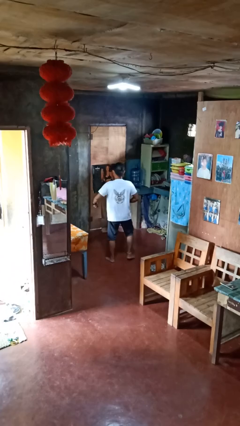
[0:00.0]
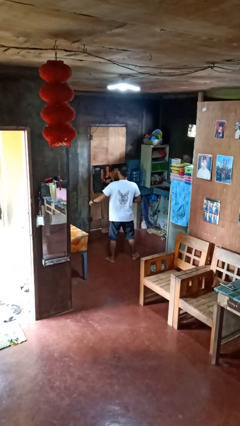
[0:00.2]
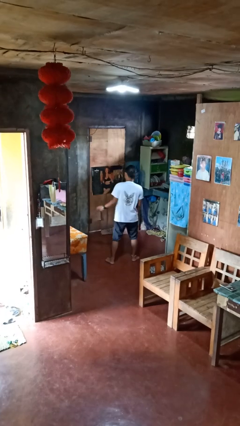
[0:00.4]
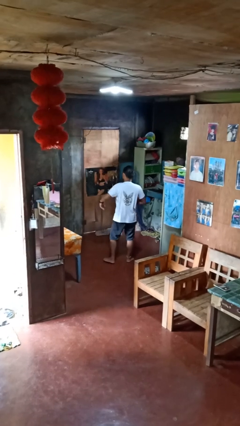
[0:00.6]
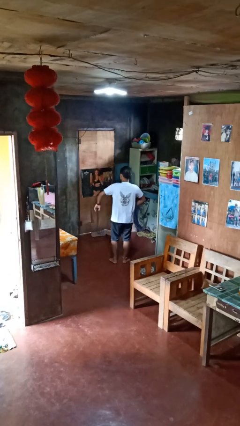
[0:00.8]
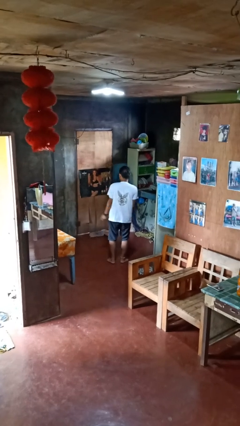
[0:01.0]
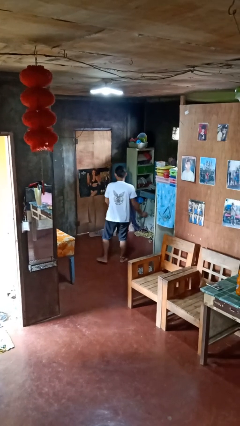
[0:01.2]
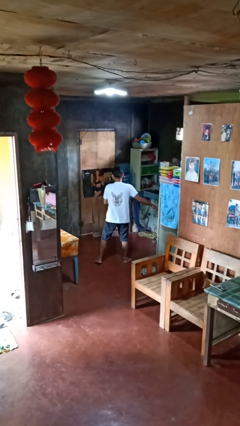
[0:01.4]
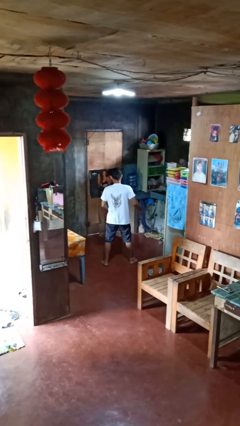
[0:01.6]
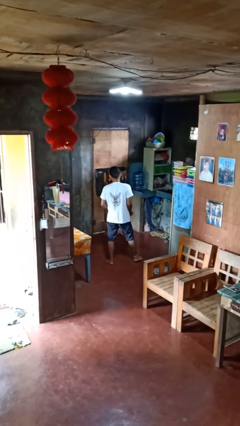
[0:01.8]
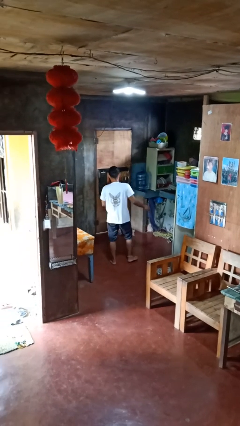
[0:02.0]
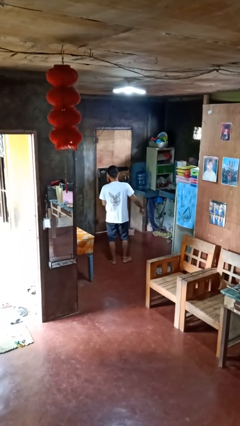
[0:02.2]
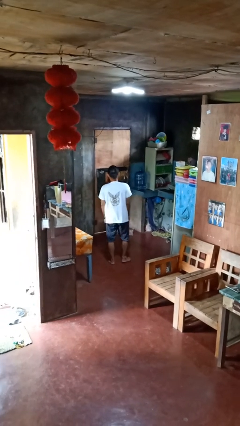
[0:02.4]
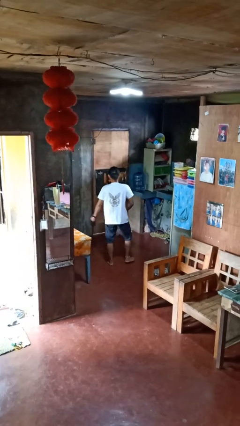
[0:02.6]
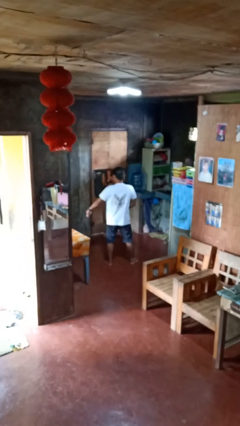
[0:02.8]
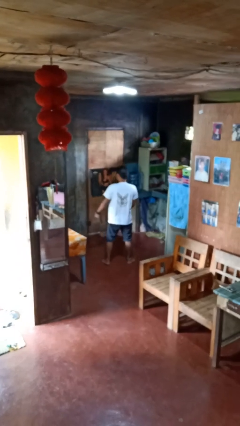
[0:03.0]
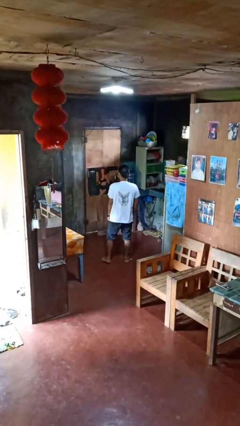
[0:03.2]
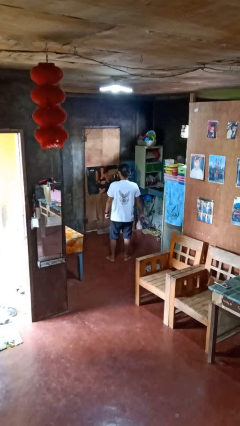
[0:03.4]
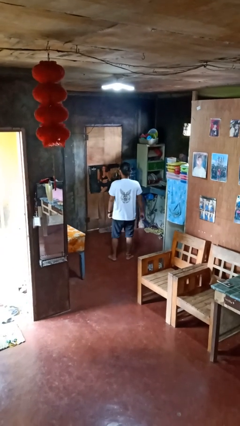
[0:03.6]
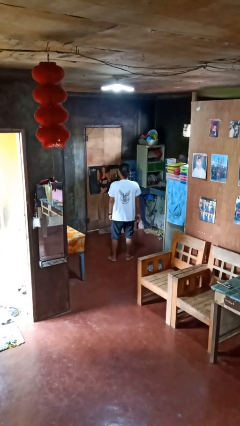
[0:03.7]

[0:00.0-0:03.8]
person dances in place

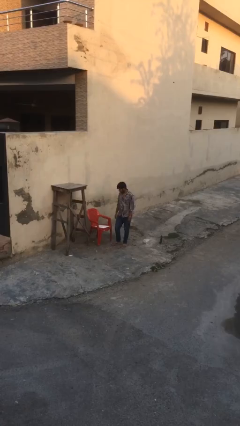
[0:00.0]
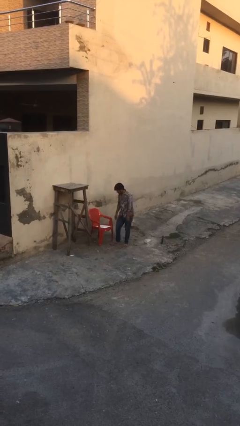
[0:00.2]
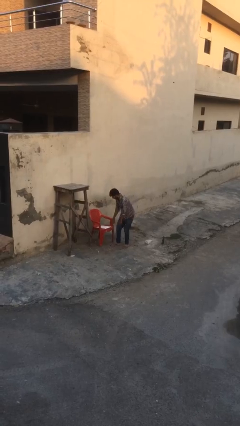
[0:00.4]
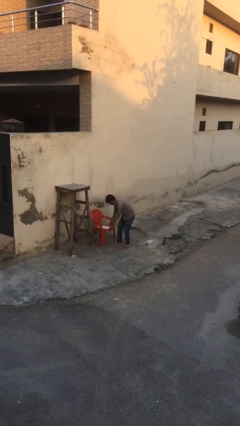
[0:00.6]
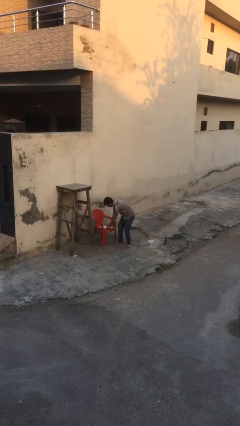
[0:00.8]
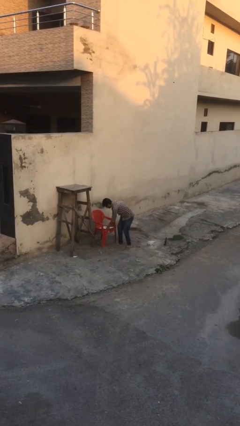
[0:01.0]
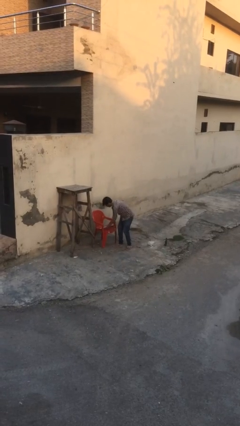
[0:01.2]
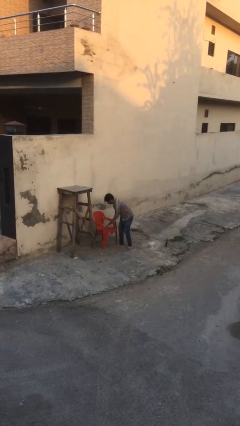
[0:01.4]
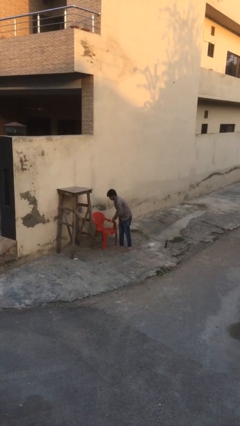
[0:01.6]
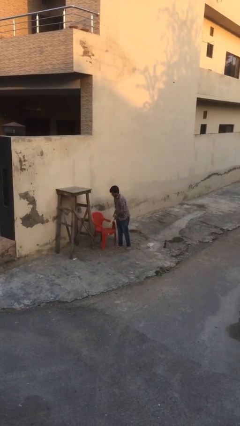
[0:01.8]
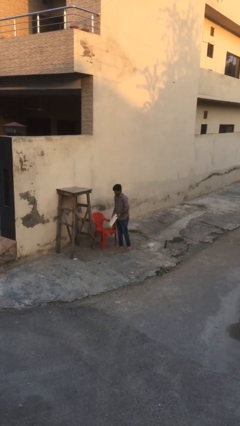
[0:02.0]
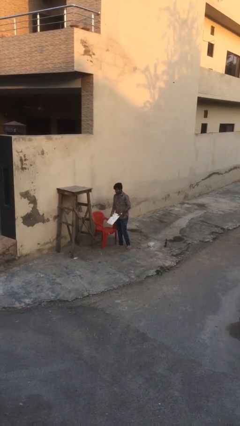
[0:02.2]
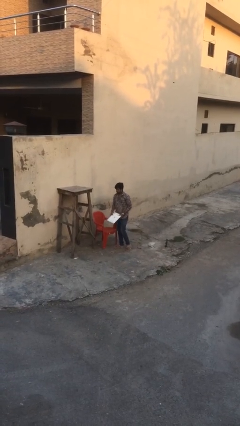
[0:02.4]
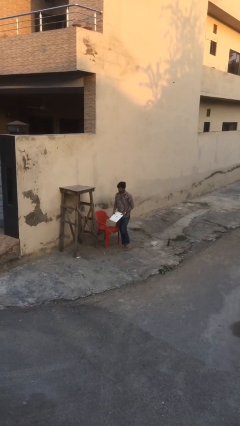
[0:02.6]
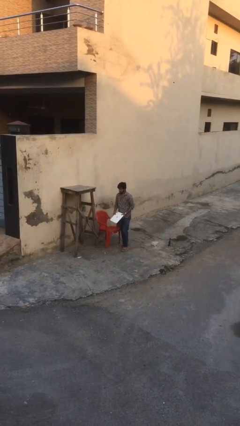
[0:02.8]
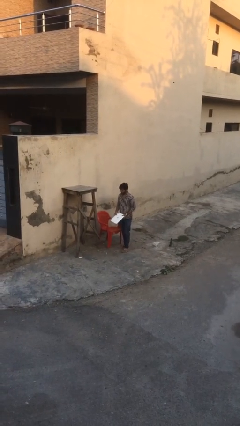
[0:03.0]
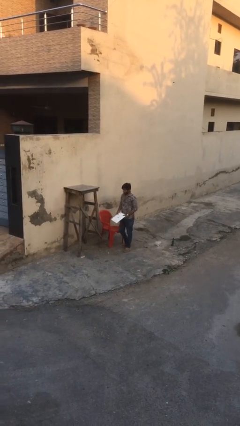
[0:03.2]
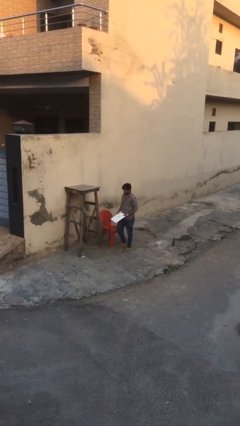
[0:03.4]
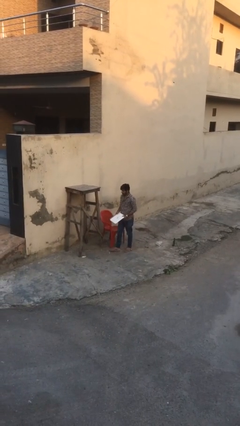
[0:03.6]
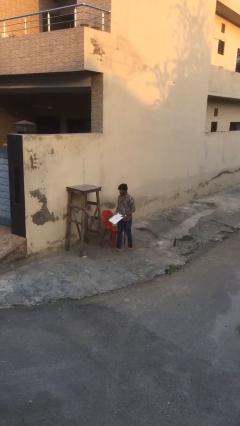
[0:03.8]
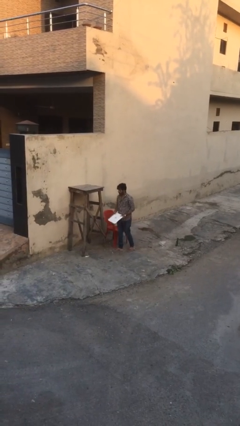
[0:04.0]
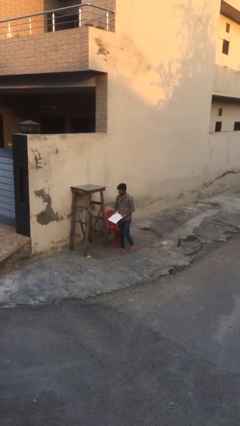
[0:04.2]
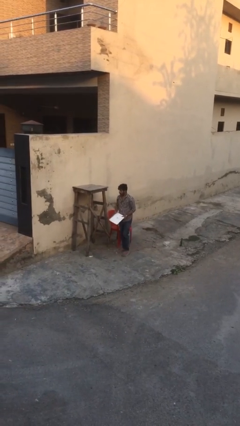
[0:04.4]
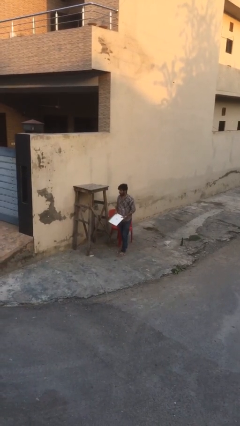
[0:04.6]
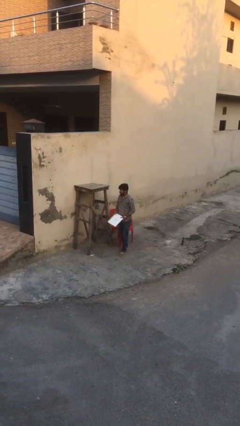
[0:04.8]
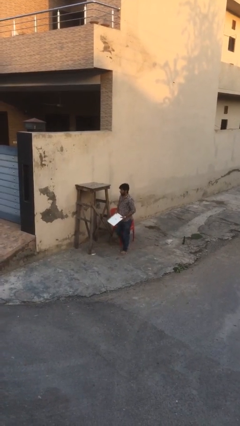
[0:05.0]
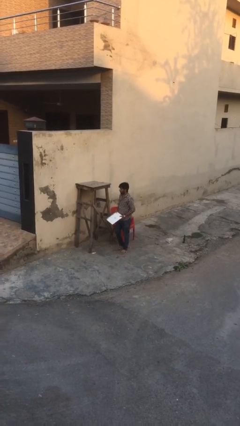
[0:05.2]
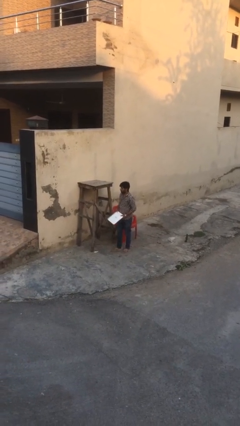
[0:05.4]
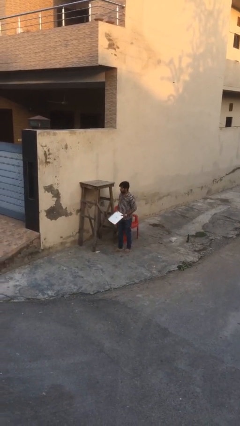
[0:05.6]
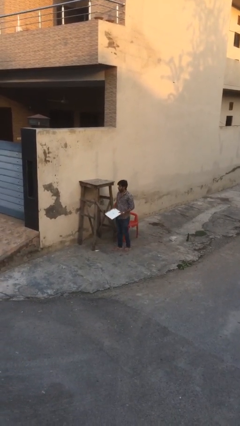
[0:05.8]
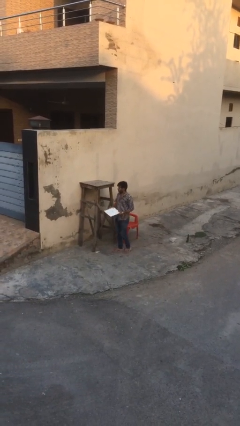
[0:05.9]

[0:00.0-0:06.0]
person picks up object from table

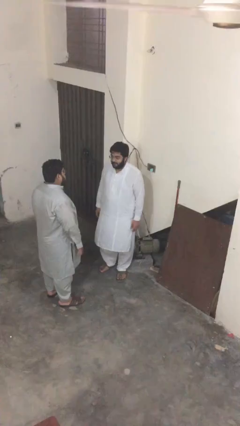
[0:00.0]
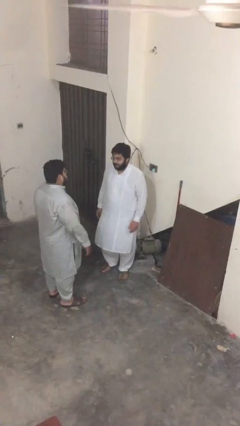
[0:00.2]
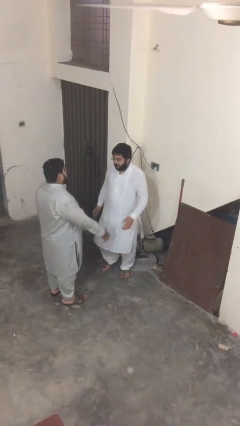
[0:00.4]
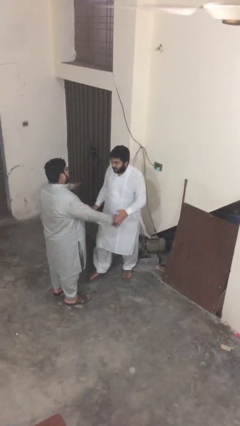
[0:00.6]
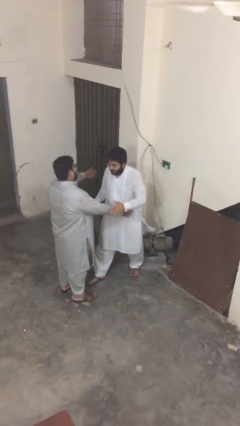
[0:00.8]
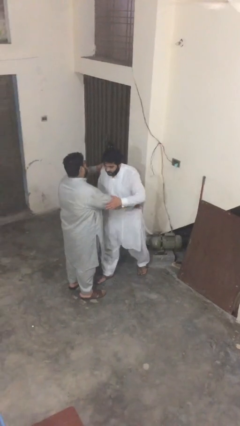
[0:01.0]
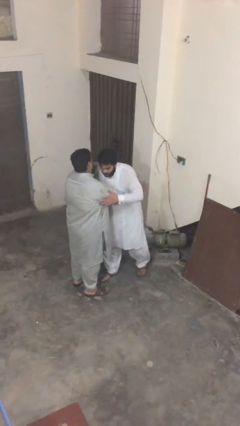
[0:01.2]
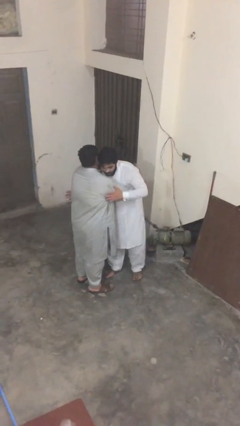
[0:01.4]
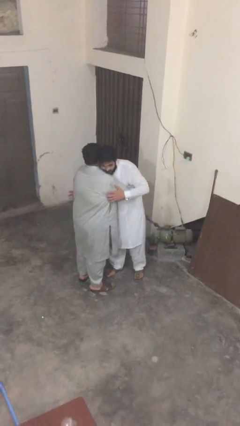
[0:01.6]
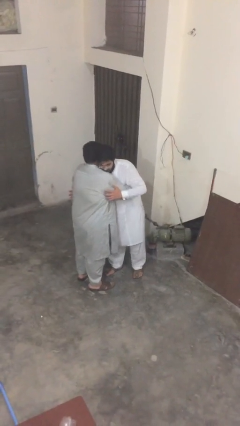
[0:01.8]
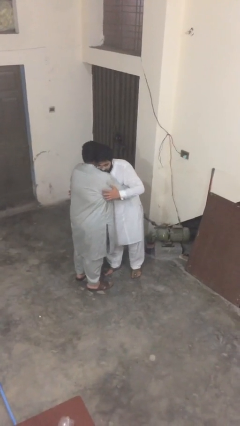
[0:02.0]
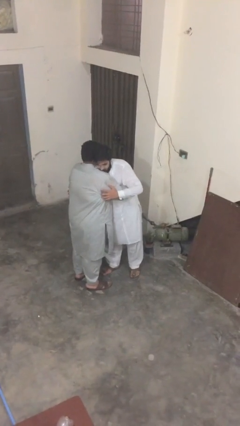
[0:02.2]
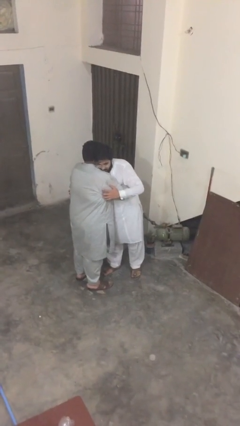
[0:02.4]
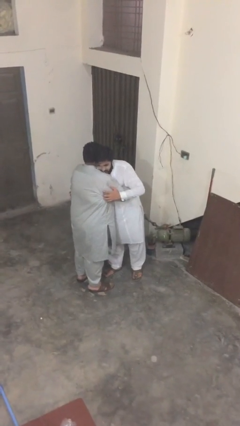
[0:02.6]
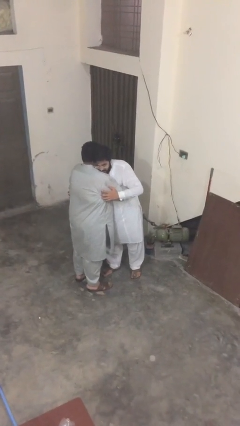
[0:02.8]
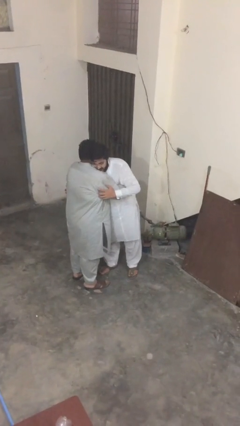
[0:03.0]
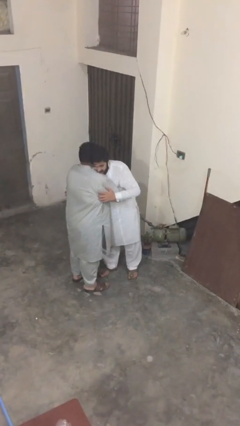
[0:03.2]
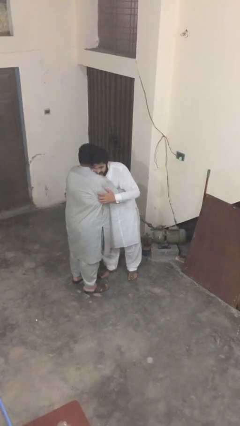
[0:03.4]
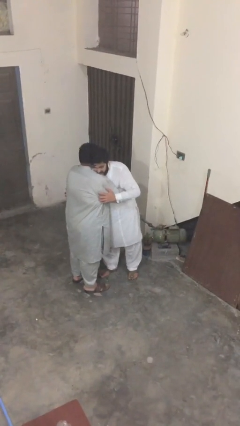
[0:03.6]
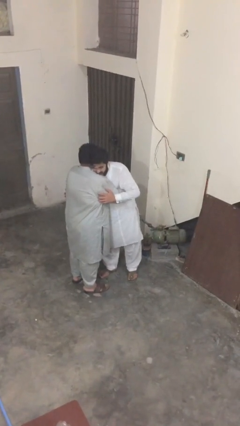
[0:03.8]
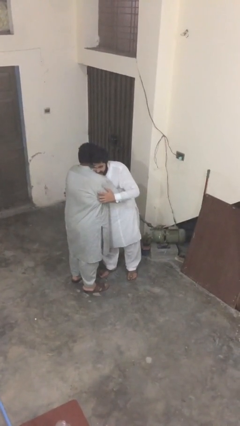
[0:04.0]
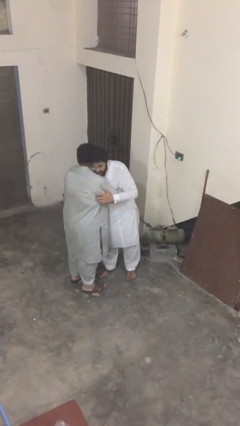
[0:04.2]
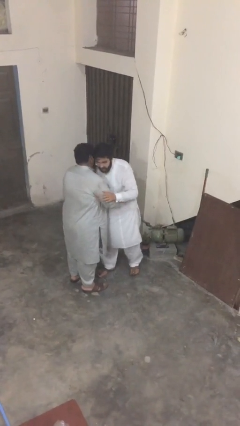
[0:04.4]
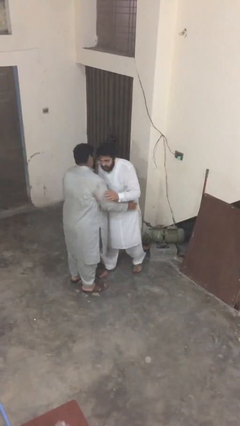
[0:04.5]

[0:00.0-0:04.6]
person embraces person

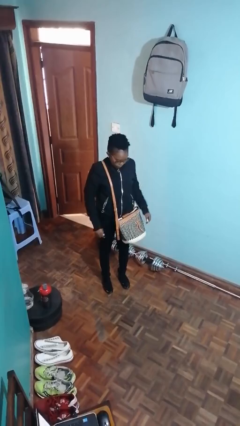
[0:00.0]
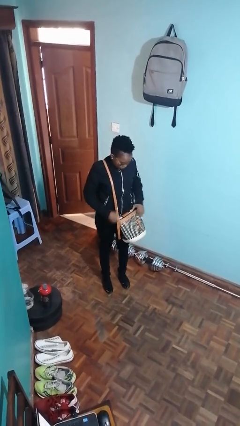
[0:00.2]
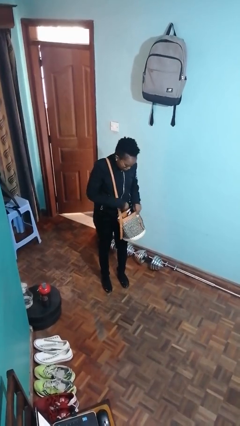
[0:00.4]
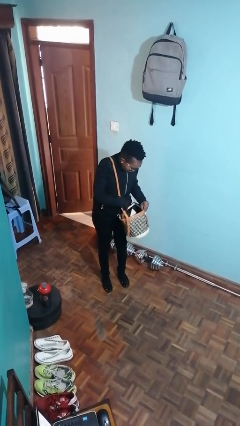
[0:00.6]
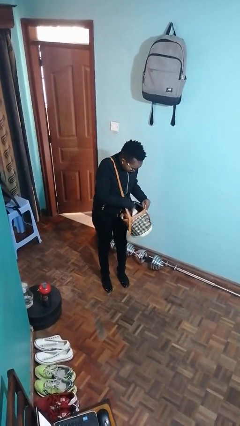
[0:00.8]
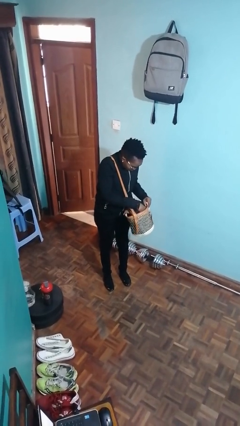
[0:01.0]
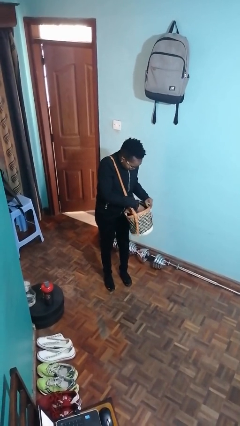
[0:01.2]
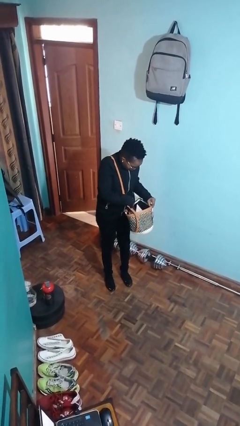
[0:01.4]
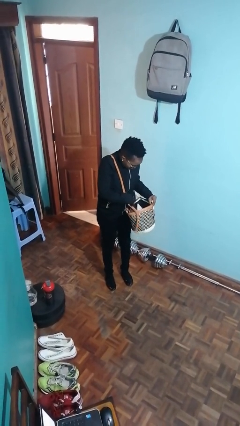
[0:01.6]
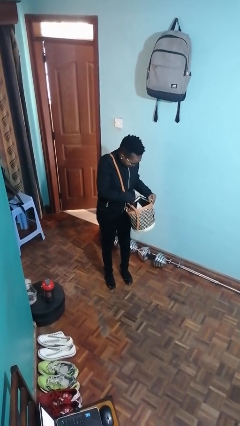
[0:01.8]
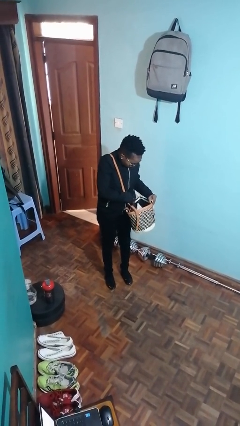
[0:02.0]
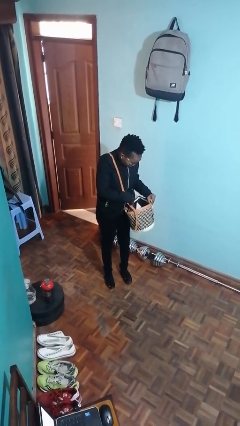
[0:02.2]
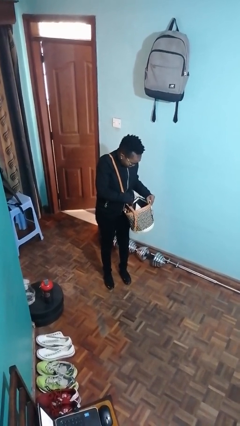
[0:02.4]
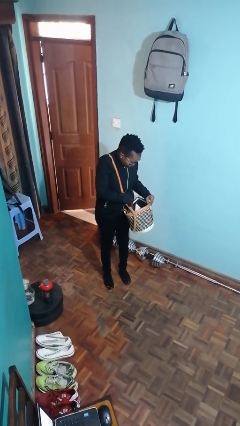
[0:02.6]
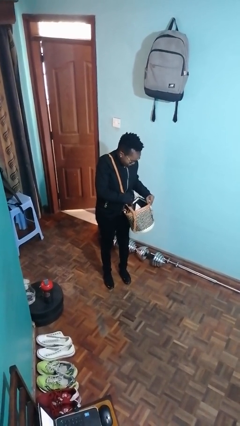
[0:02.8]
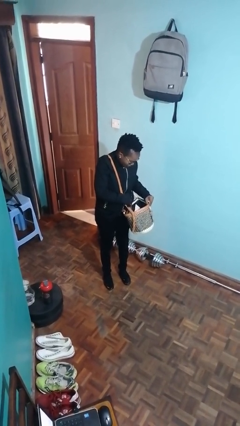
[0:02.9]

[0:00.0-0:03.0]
person searches in purse
